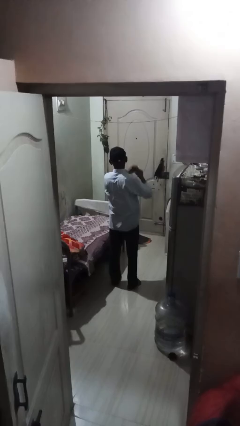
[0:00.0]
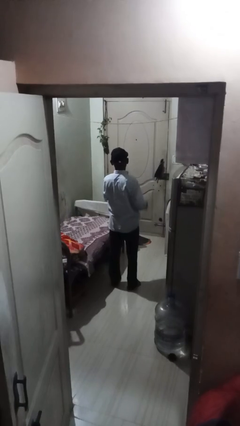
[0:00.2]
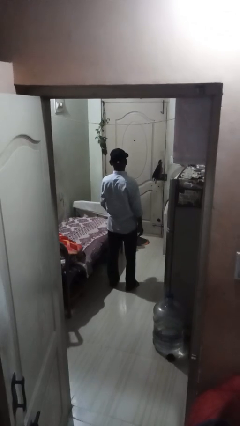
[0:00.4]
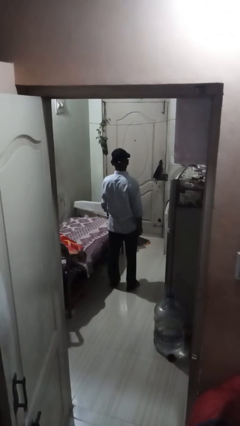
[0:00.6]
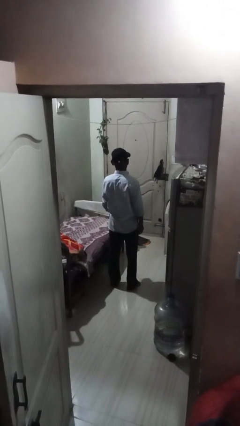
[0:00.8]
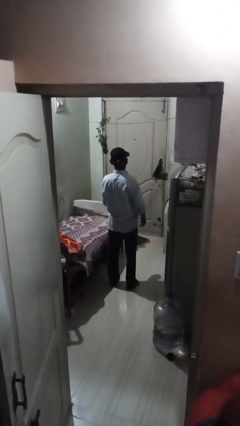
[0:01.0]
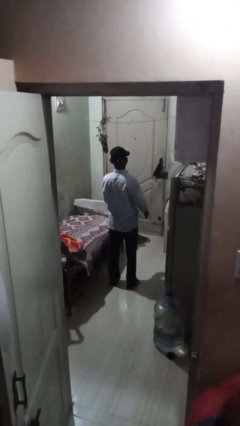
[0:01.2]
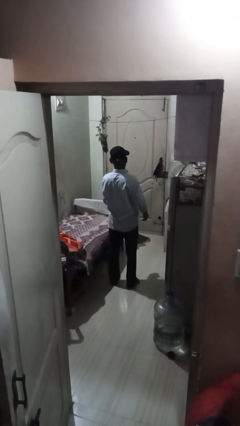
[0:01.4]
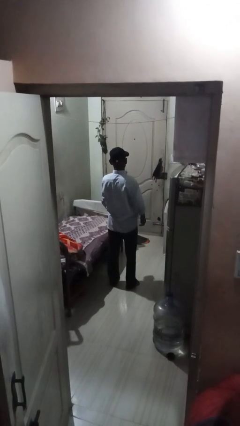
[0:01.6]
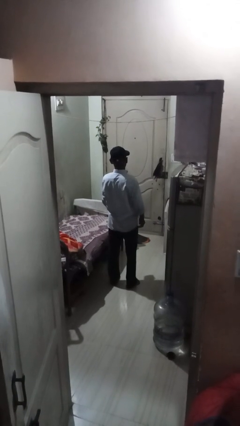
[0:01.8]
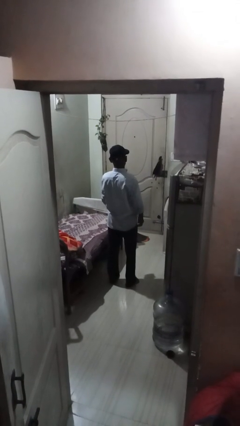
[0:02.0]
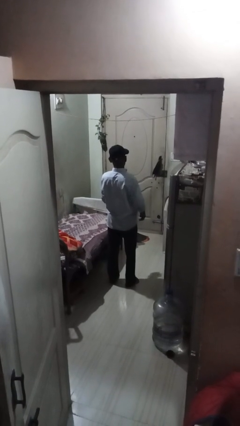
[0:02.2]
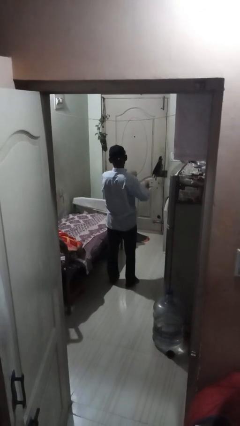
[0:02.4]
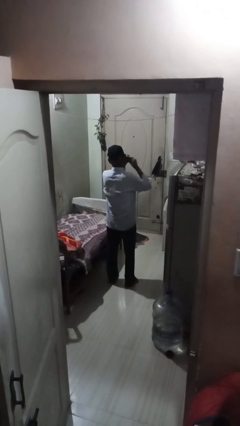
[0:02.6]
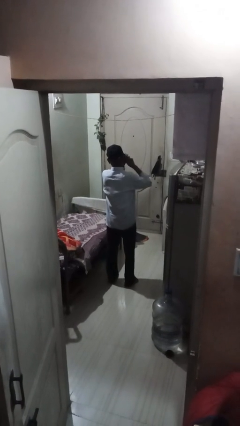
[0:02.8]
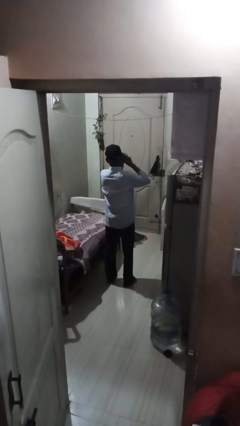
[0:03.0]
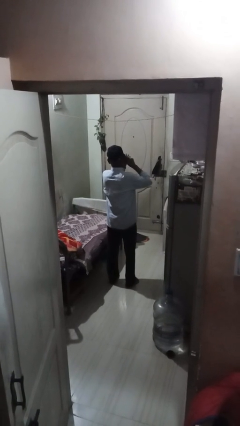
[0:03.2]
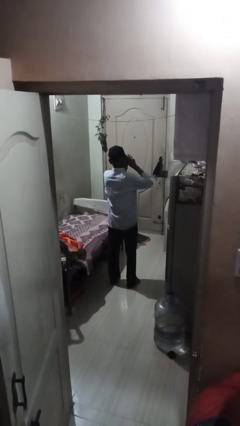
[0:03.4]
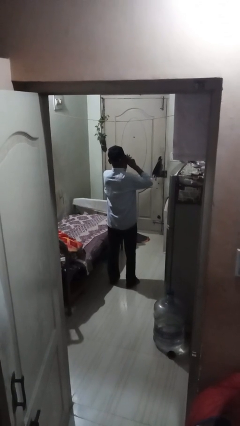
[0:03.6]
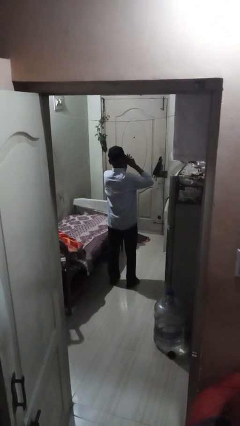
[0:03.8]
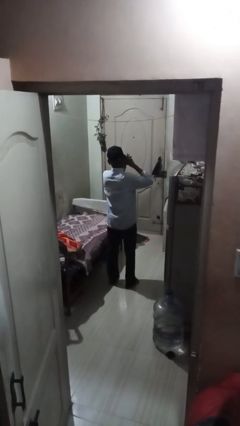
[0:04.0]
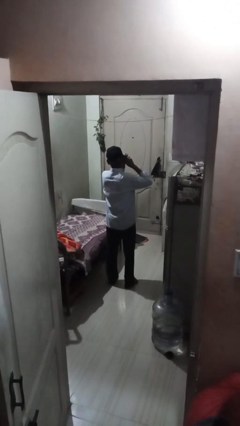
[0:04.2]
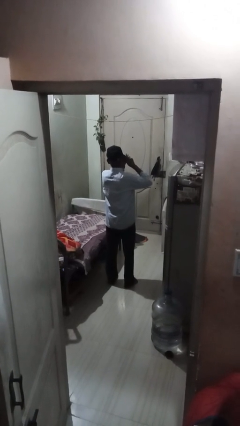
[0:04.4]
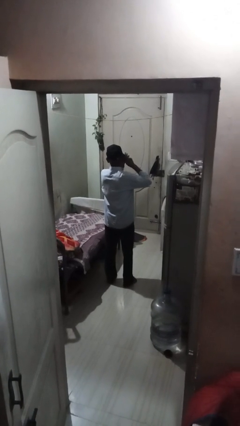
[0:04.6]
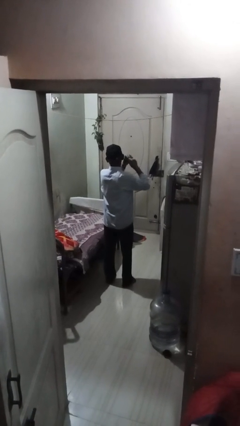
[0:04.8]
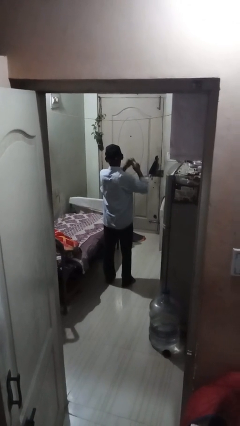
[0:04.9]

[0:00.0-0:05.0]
person takes off earrings

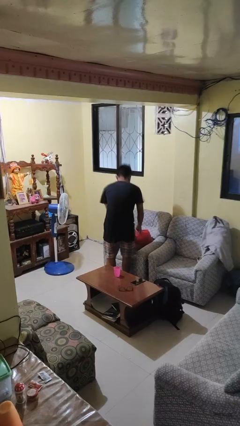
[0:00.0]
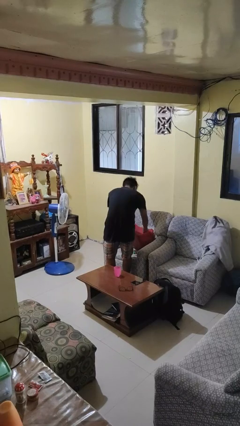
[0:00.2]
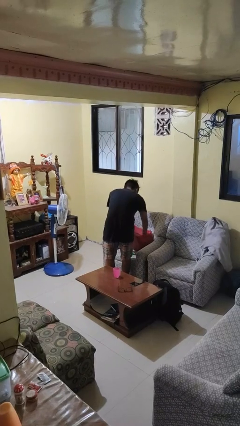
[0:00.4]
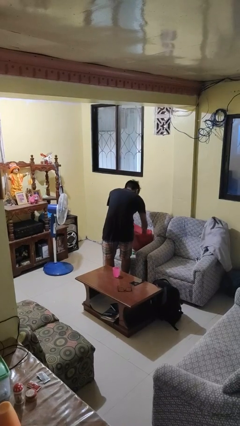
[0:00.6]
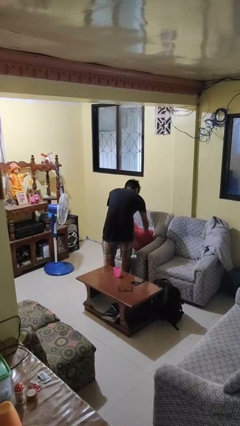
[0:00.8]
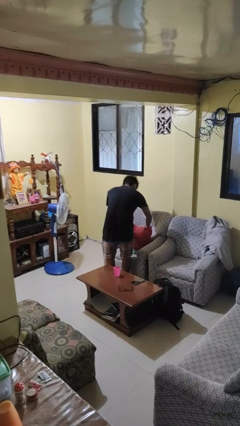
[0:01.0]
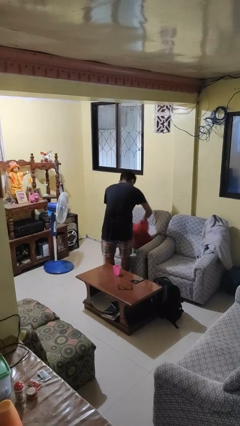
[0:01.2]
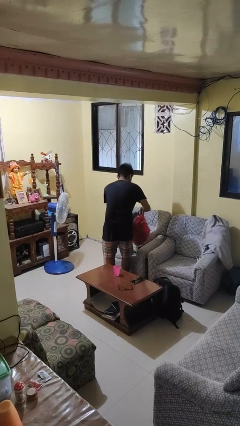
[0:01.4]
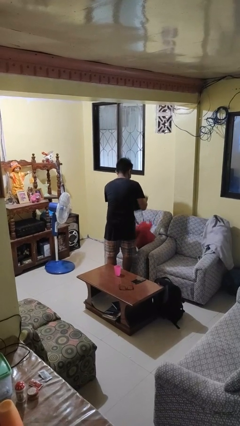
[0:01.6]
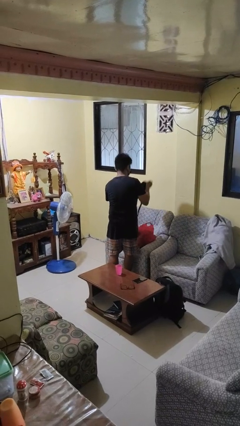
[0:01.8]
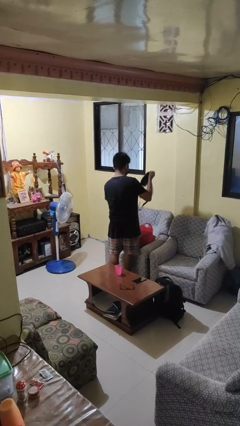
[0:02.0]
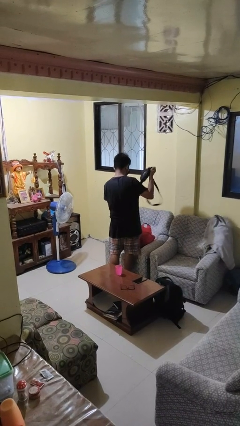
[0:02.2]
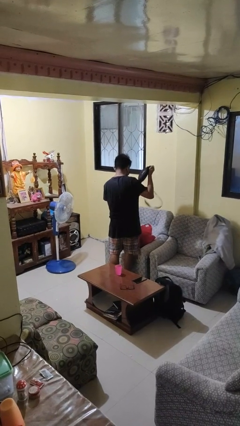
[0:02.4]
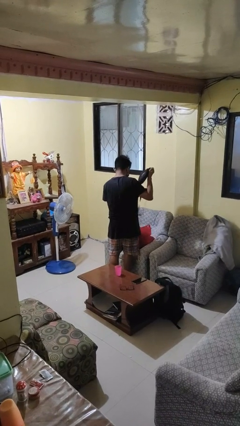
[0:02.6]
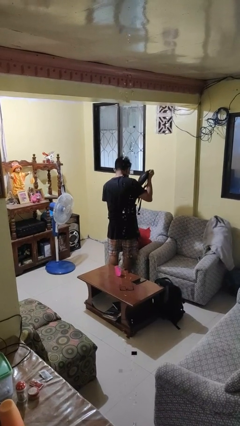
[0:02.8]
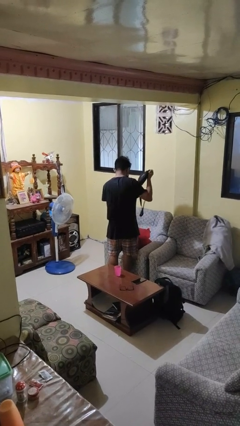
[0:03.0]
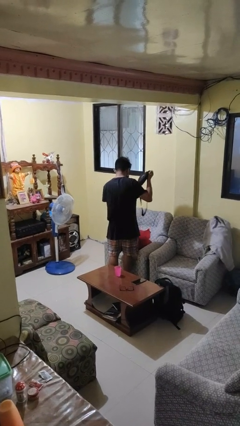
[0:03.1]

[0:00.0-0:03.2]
person takes object from bag

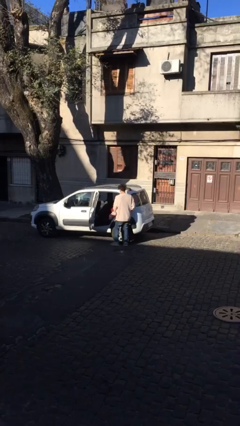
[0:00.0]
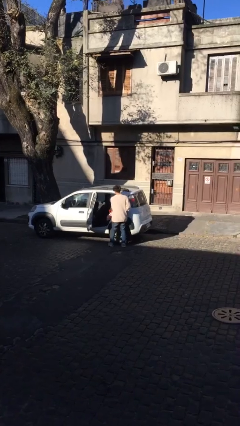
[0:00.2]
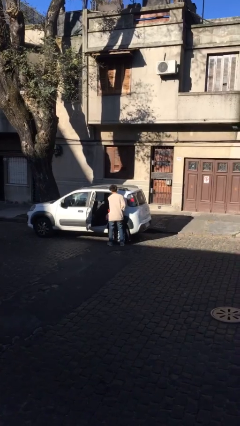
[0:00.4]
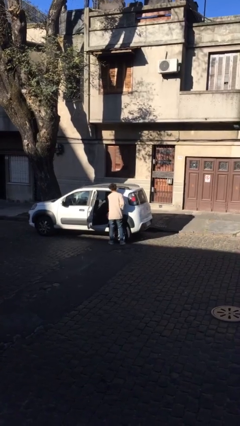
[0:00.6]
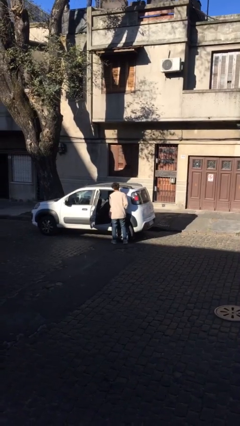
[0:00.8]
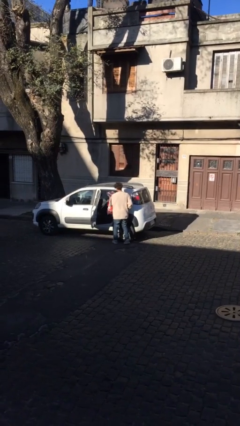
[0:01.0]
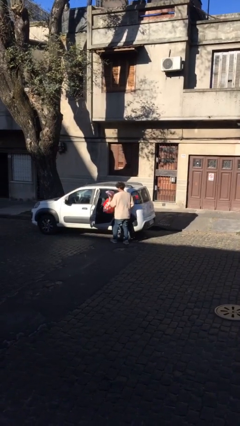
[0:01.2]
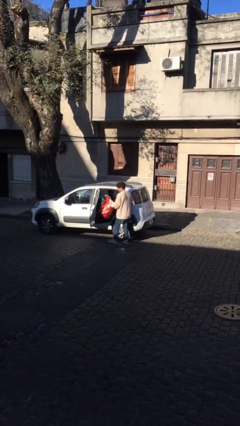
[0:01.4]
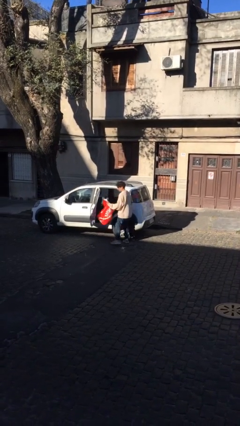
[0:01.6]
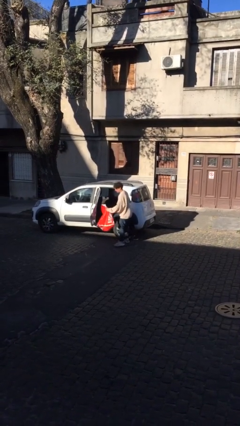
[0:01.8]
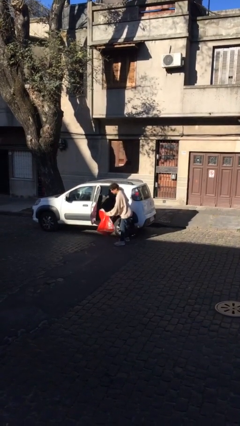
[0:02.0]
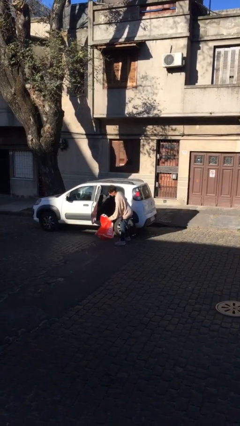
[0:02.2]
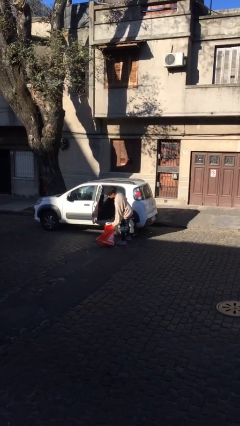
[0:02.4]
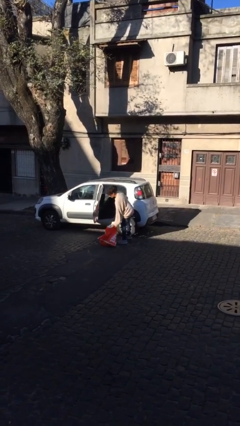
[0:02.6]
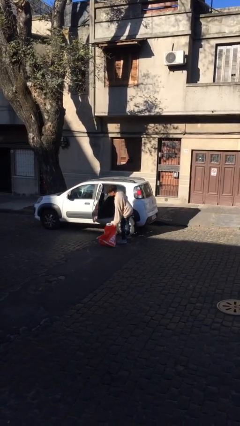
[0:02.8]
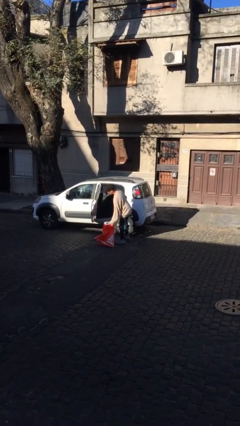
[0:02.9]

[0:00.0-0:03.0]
person unloads car

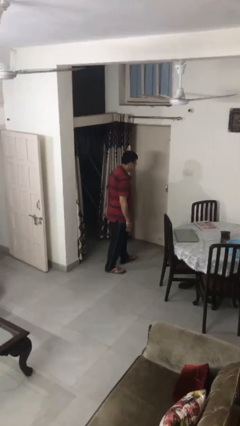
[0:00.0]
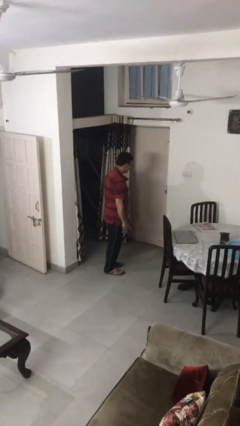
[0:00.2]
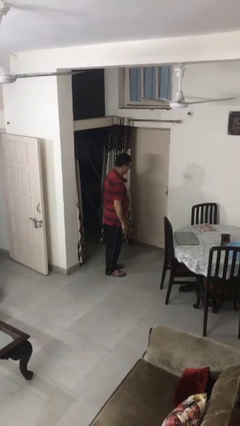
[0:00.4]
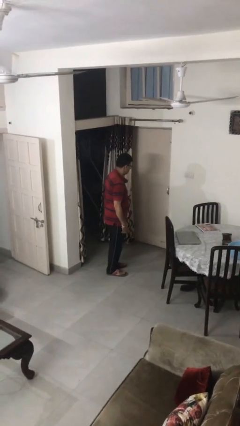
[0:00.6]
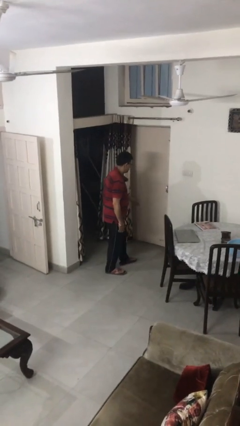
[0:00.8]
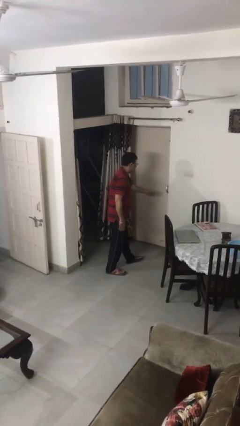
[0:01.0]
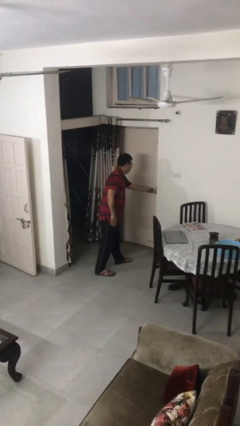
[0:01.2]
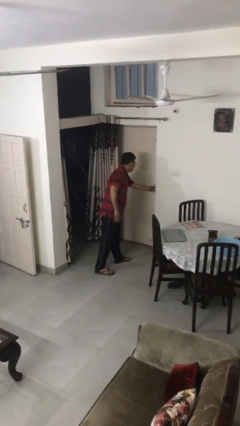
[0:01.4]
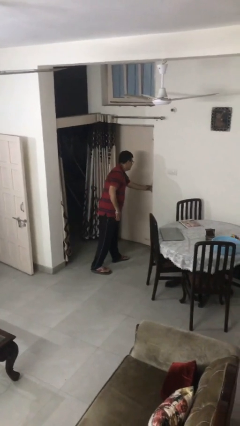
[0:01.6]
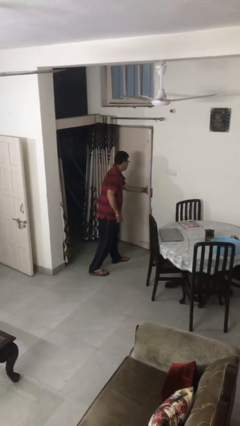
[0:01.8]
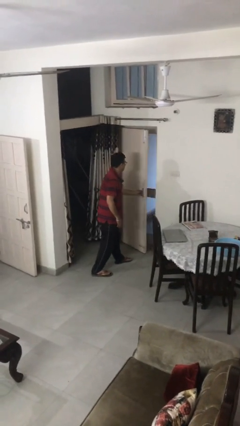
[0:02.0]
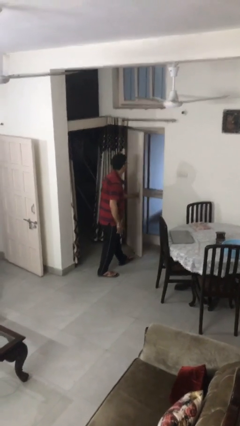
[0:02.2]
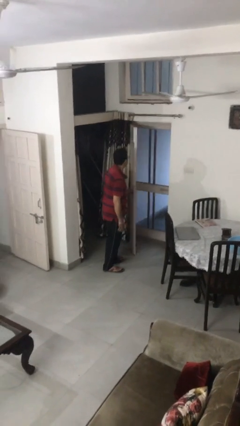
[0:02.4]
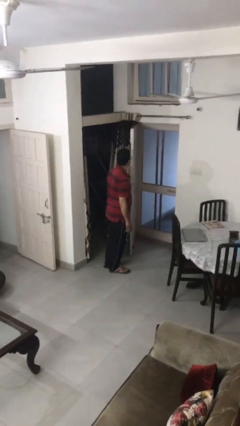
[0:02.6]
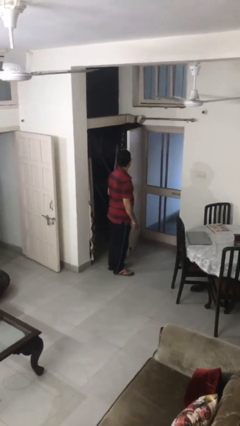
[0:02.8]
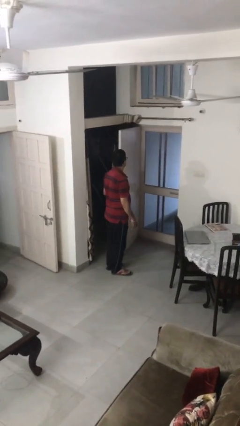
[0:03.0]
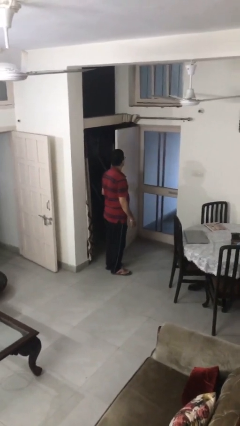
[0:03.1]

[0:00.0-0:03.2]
person opens facility door

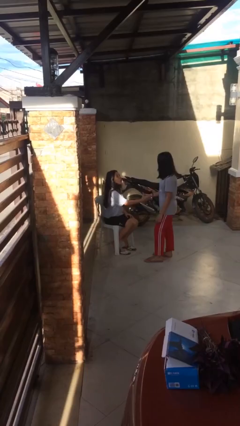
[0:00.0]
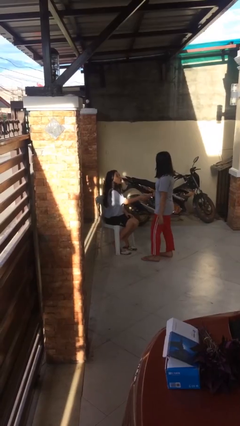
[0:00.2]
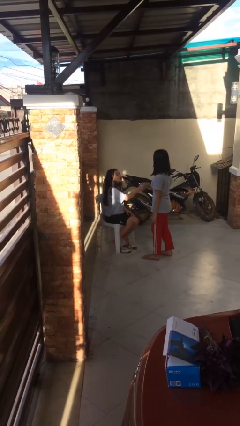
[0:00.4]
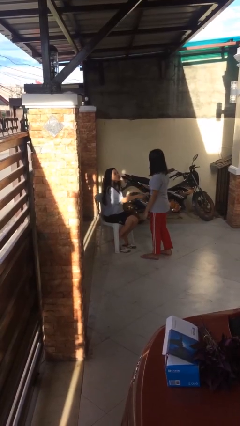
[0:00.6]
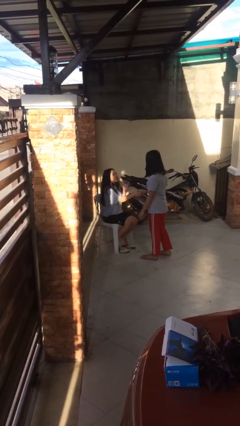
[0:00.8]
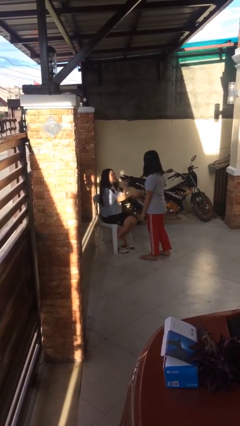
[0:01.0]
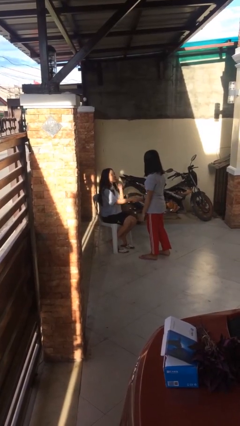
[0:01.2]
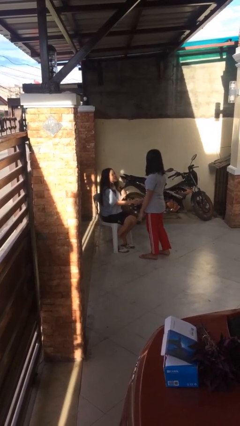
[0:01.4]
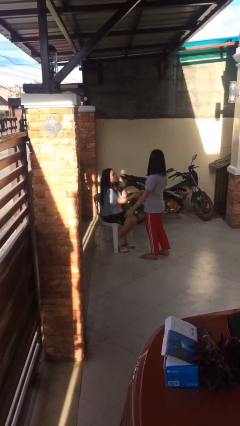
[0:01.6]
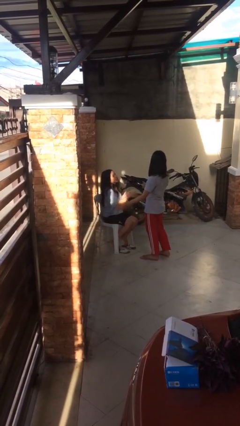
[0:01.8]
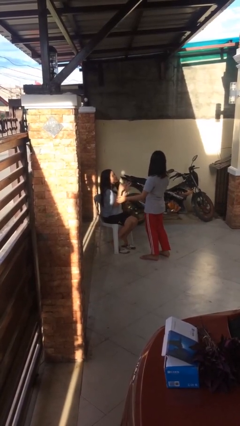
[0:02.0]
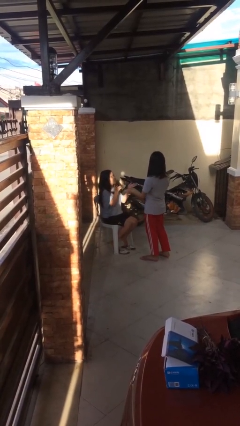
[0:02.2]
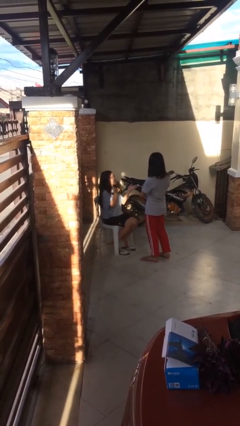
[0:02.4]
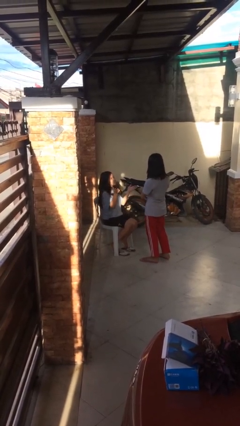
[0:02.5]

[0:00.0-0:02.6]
person shakes hand

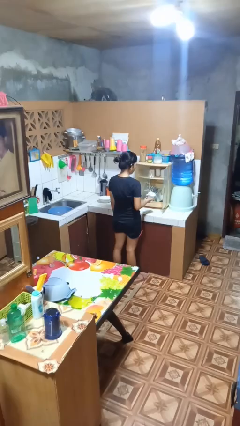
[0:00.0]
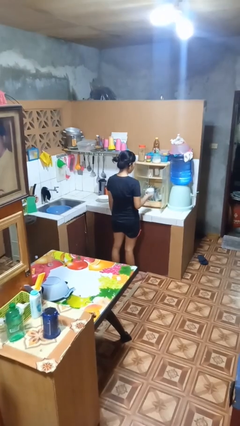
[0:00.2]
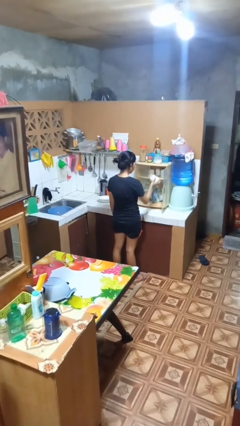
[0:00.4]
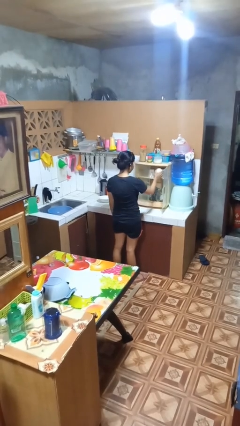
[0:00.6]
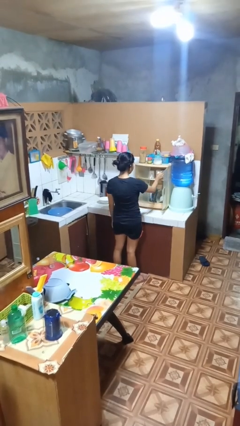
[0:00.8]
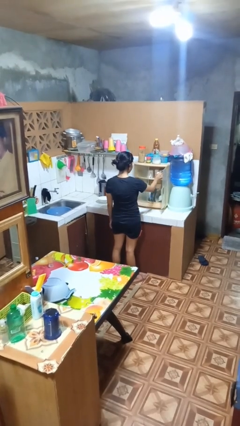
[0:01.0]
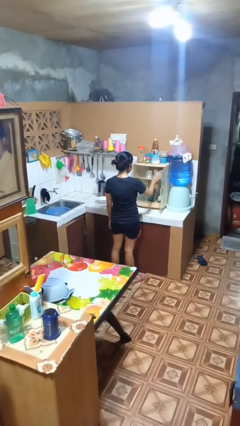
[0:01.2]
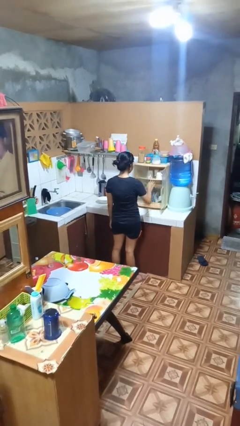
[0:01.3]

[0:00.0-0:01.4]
person puts object into kitchen drawer
